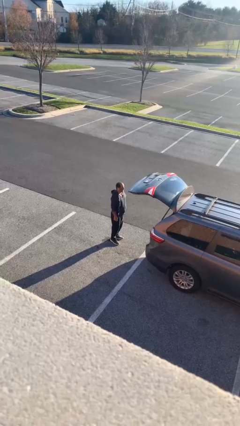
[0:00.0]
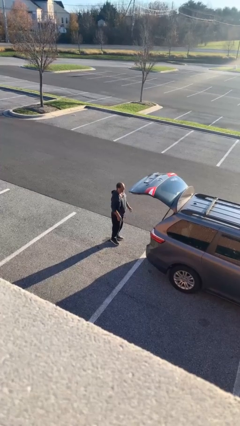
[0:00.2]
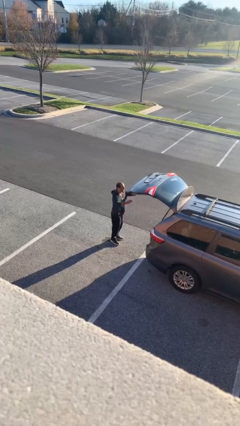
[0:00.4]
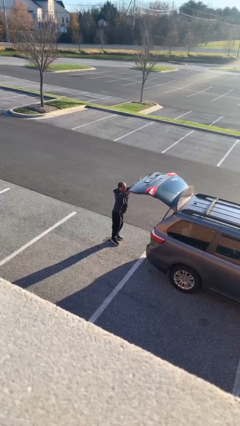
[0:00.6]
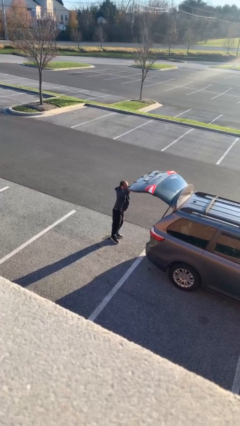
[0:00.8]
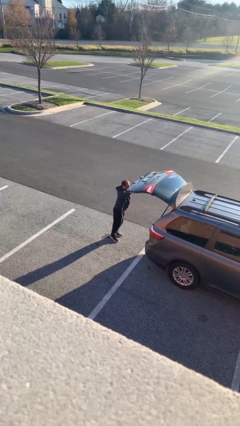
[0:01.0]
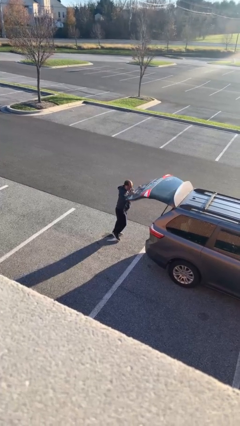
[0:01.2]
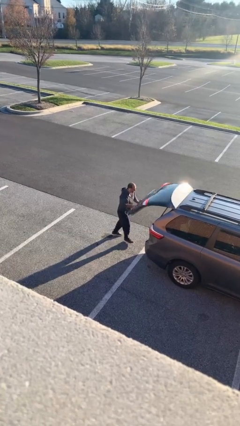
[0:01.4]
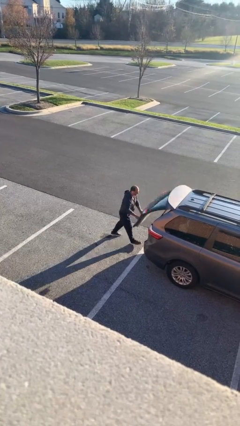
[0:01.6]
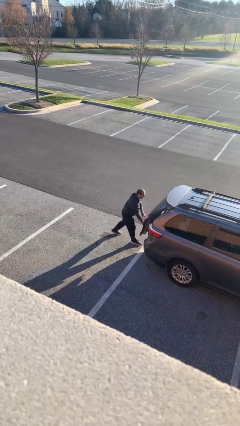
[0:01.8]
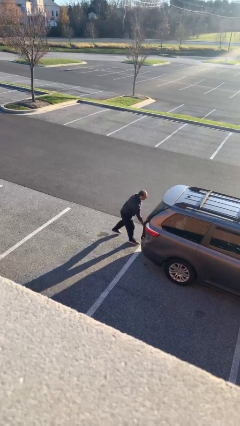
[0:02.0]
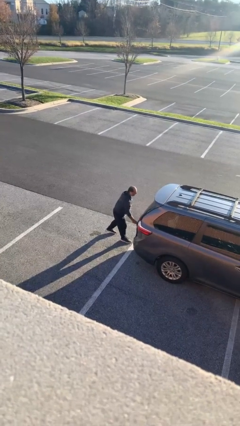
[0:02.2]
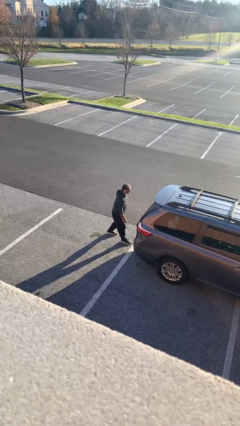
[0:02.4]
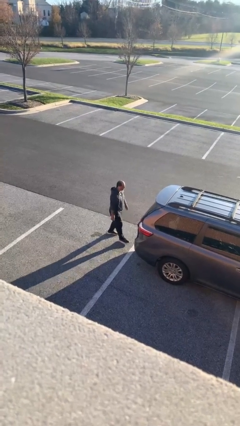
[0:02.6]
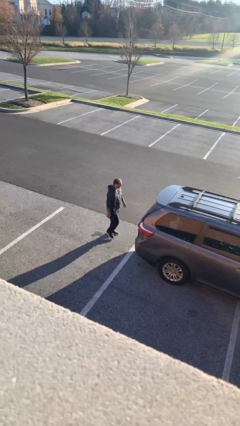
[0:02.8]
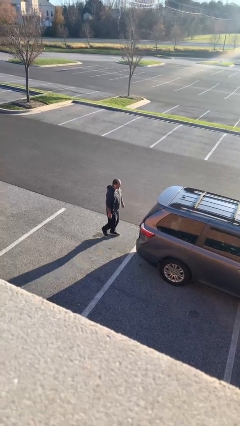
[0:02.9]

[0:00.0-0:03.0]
person closes car trunk

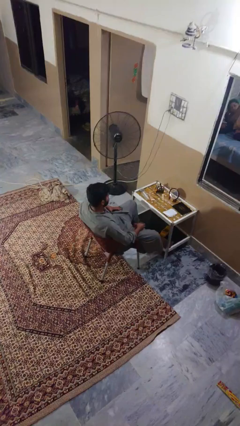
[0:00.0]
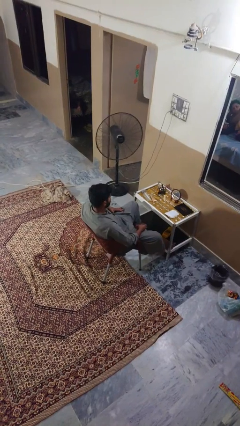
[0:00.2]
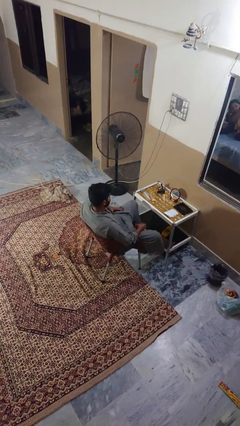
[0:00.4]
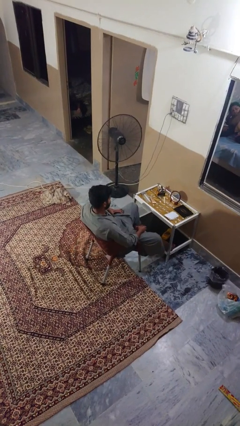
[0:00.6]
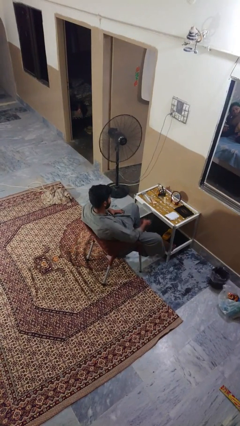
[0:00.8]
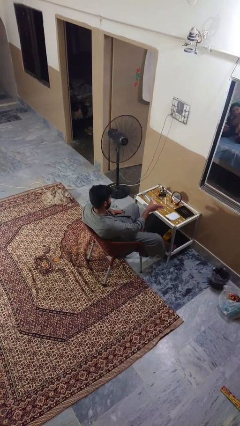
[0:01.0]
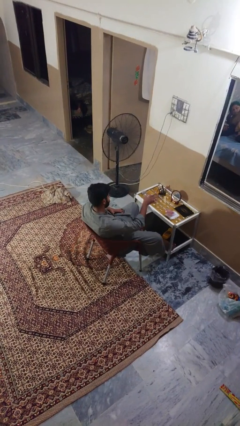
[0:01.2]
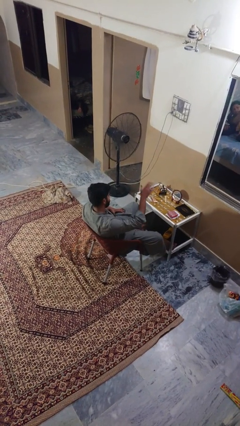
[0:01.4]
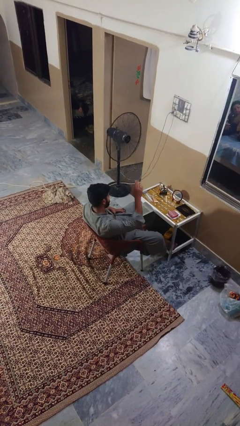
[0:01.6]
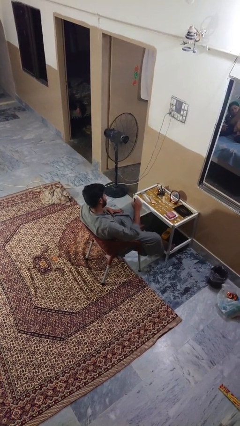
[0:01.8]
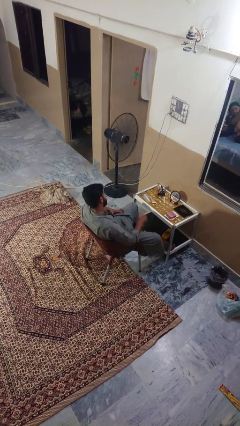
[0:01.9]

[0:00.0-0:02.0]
person throws object on table

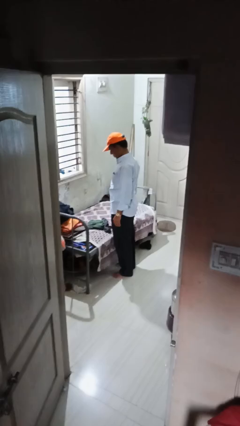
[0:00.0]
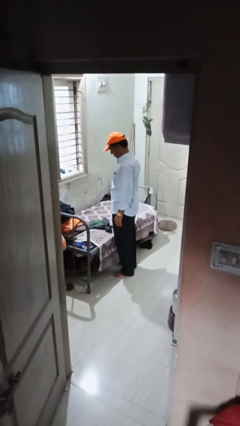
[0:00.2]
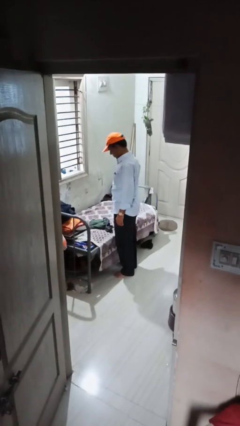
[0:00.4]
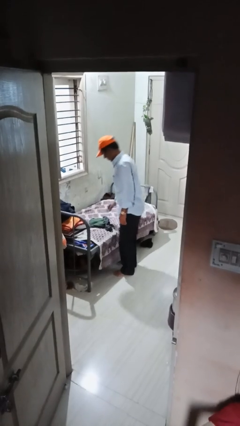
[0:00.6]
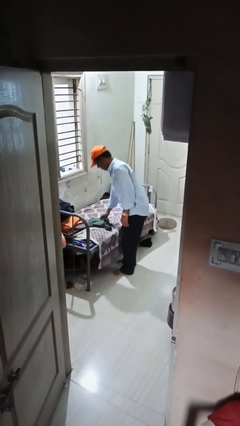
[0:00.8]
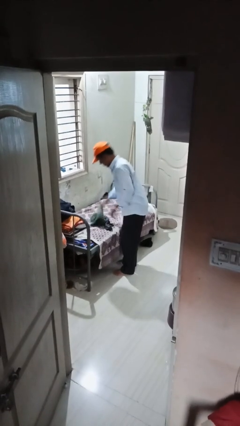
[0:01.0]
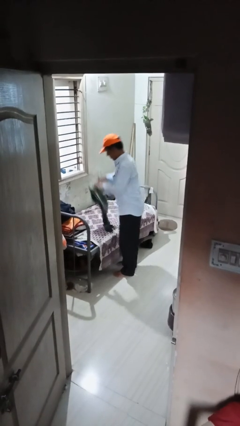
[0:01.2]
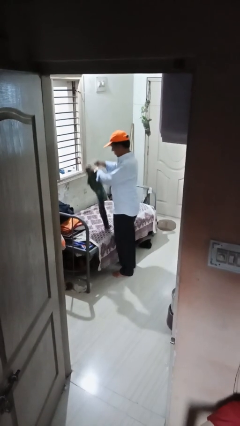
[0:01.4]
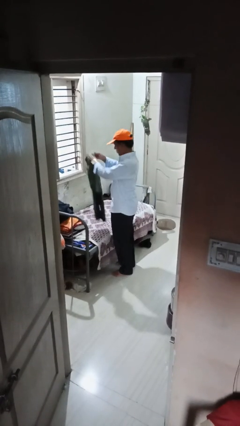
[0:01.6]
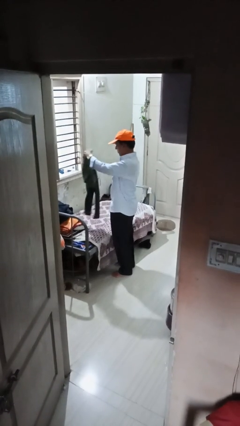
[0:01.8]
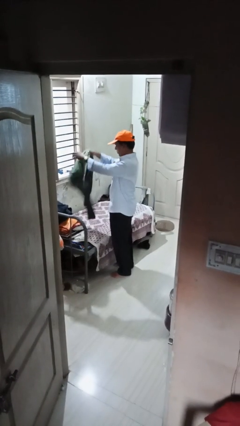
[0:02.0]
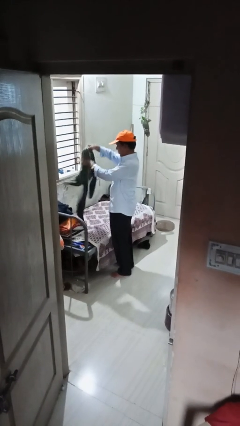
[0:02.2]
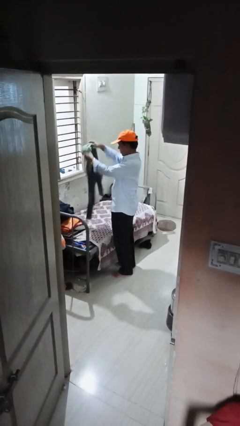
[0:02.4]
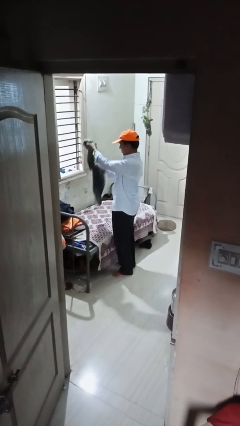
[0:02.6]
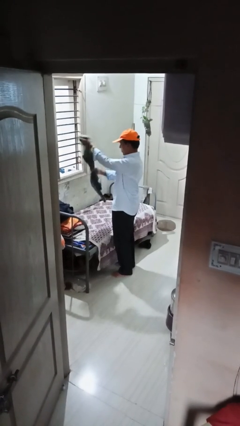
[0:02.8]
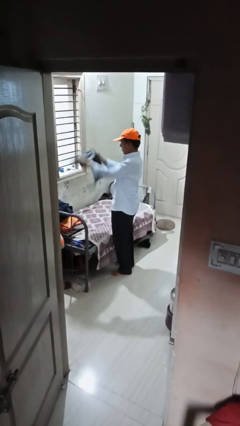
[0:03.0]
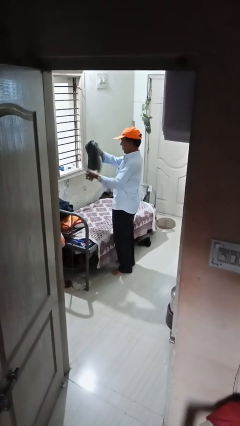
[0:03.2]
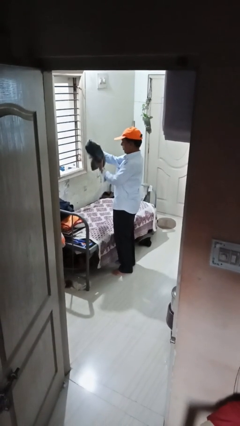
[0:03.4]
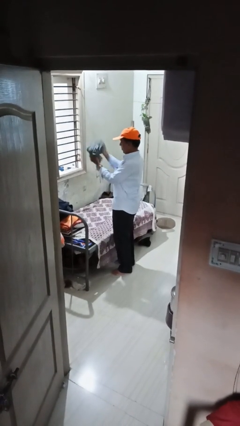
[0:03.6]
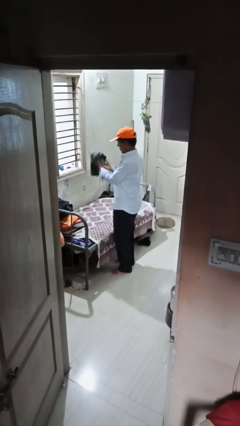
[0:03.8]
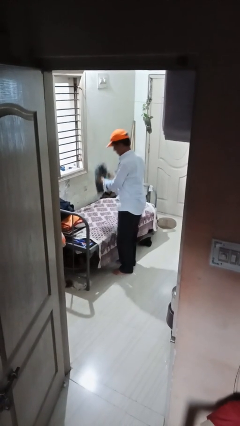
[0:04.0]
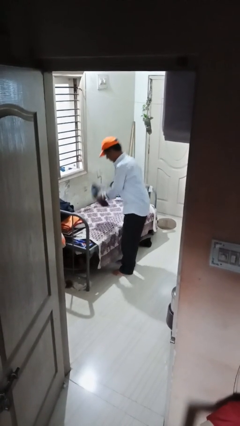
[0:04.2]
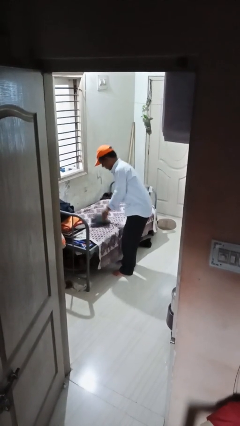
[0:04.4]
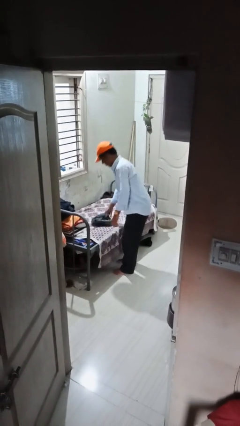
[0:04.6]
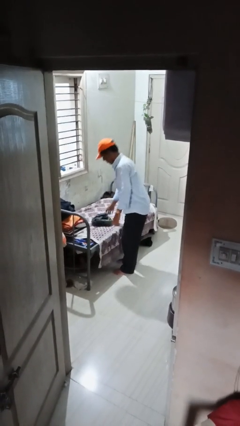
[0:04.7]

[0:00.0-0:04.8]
person folds shirt

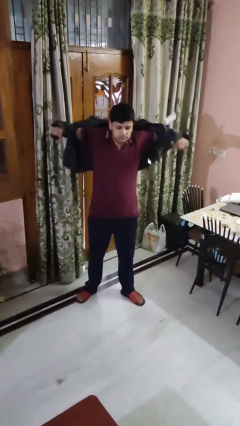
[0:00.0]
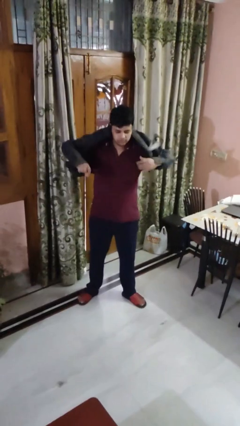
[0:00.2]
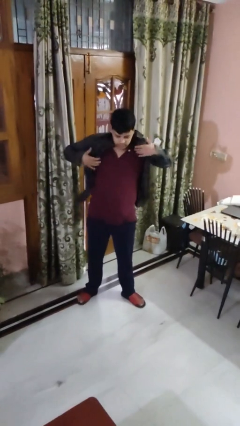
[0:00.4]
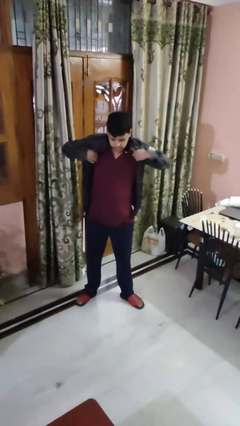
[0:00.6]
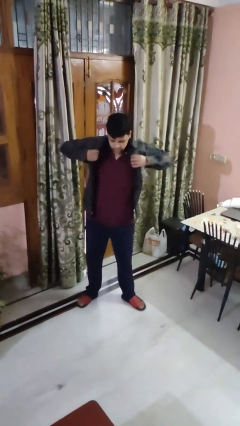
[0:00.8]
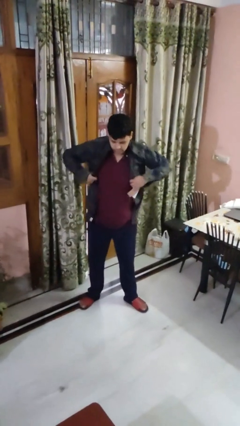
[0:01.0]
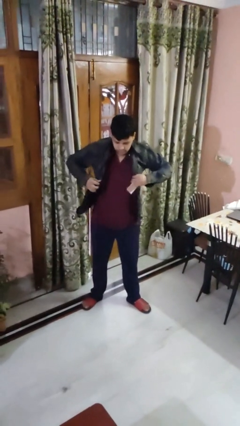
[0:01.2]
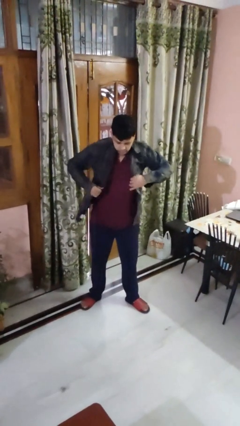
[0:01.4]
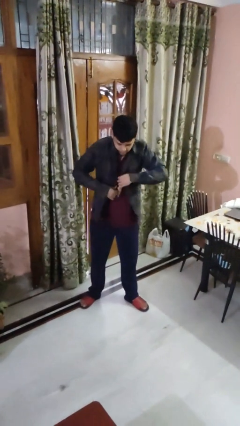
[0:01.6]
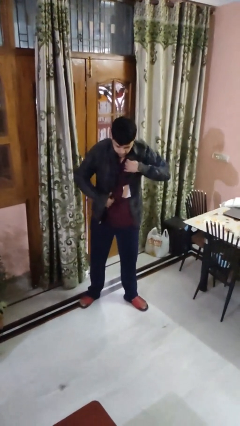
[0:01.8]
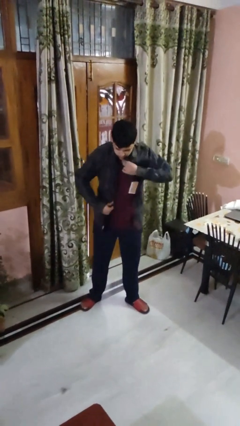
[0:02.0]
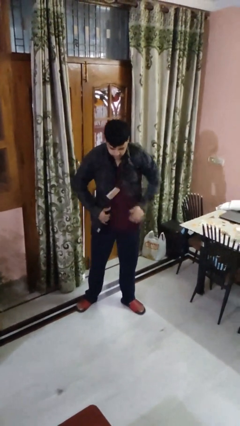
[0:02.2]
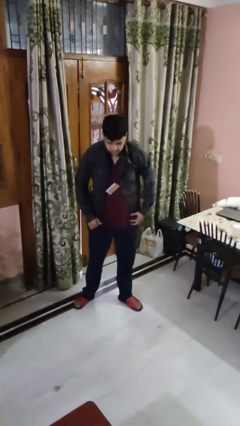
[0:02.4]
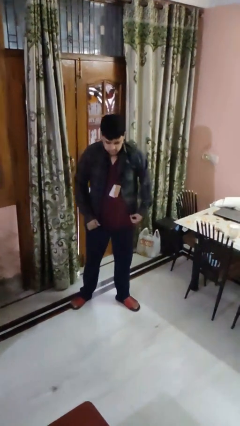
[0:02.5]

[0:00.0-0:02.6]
person puts on shirt

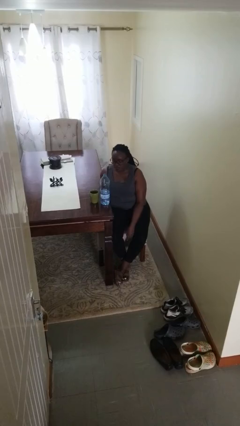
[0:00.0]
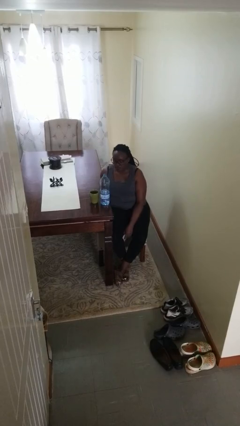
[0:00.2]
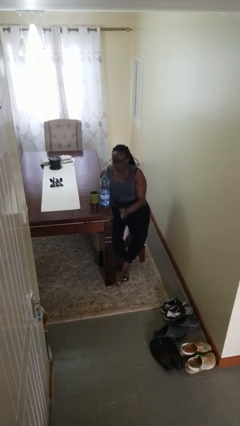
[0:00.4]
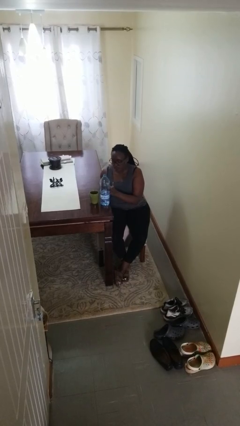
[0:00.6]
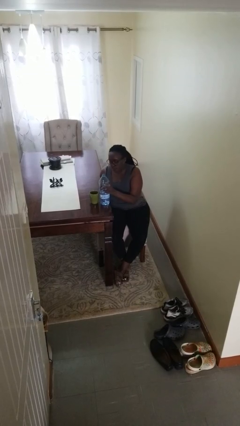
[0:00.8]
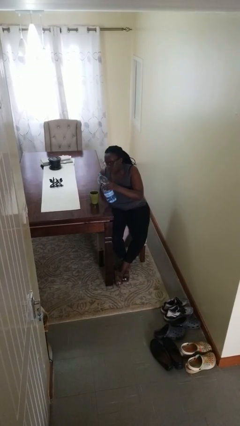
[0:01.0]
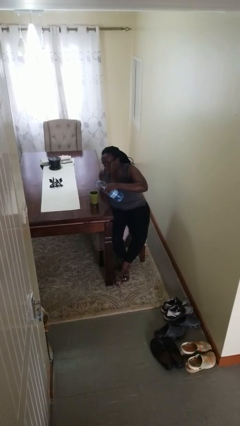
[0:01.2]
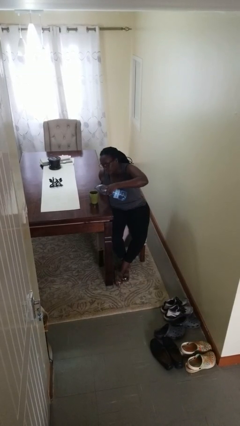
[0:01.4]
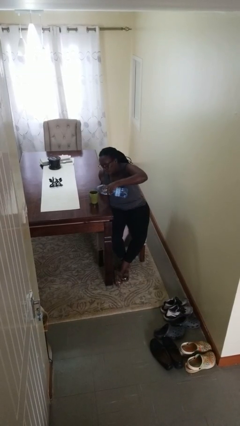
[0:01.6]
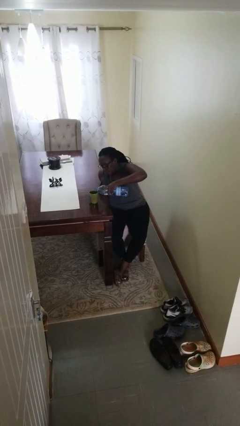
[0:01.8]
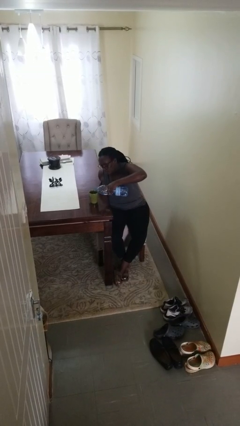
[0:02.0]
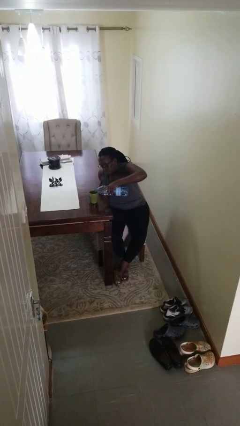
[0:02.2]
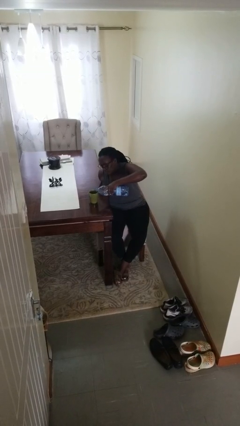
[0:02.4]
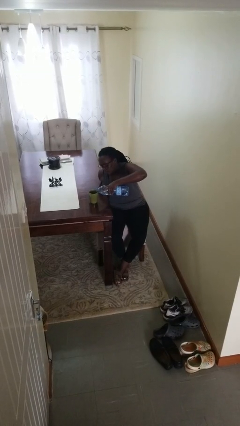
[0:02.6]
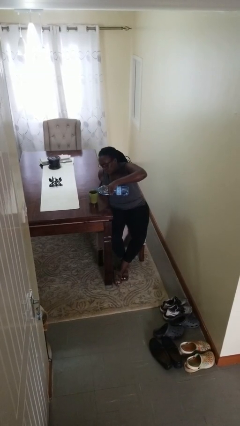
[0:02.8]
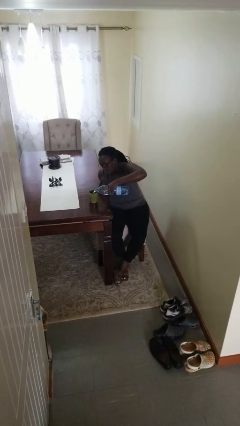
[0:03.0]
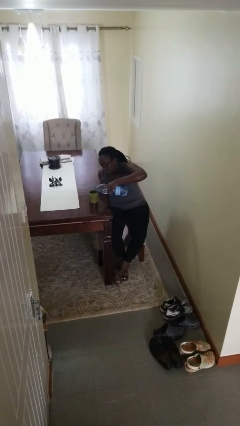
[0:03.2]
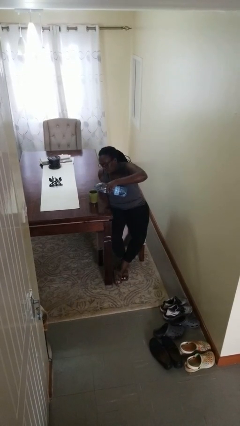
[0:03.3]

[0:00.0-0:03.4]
person pours liquid into cup

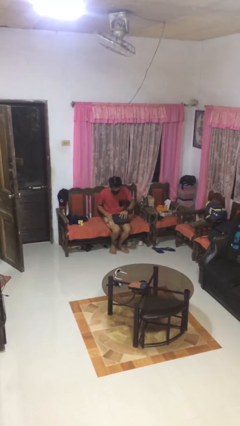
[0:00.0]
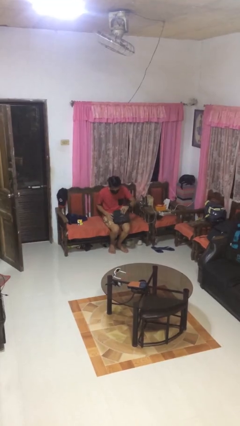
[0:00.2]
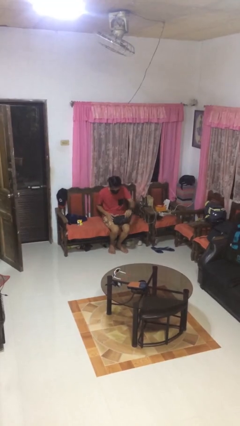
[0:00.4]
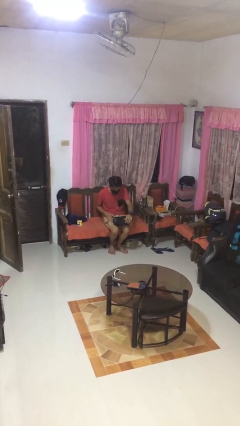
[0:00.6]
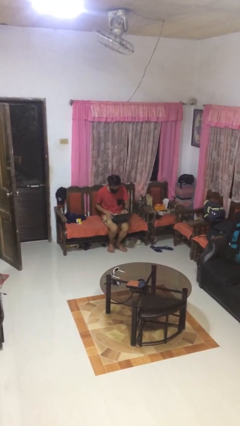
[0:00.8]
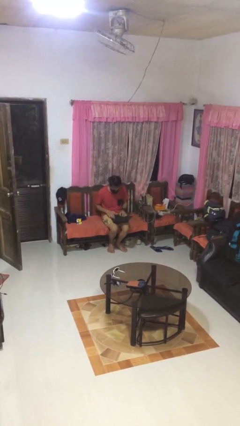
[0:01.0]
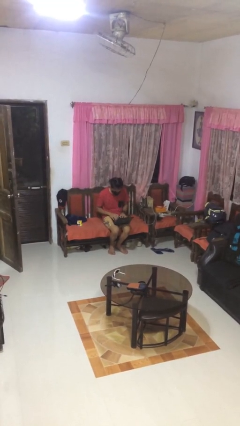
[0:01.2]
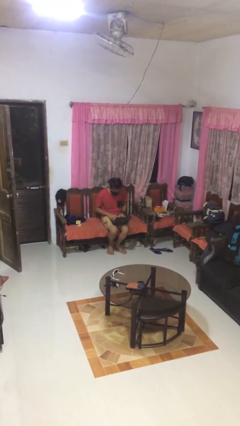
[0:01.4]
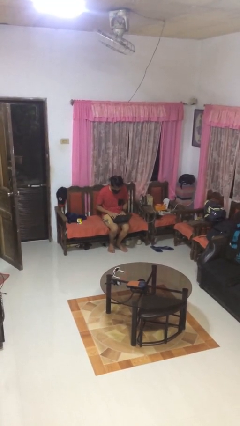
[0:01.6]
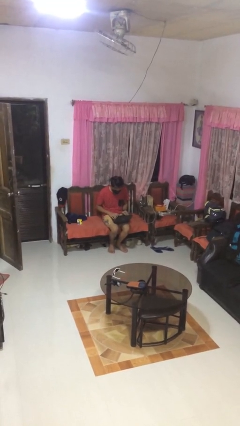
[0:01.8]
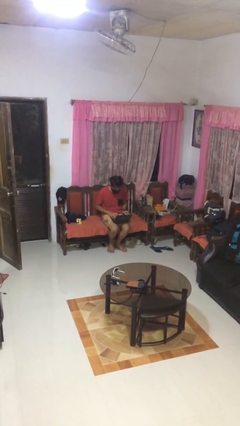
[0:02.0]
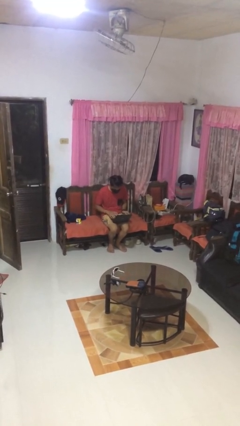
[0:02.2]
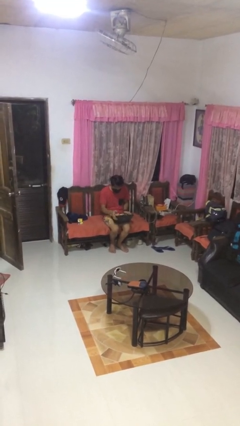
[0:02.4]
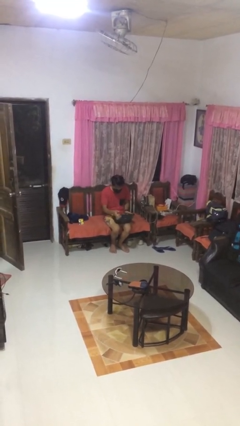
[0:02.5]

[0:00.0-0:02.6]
person opens laptop
